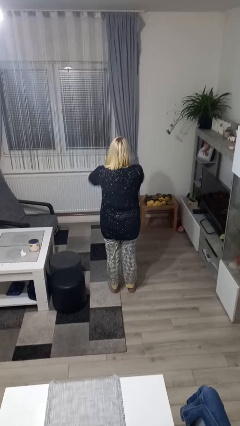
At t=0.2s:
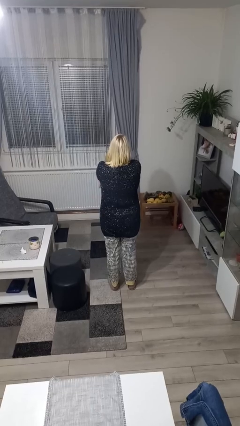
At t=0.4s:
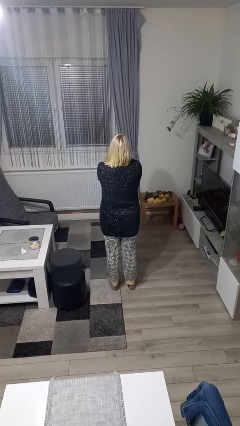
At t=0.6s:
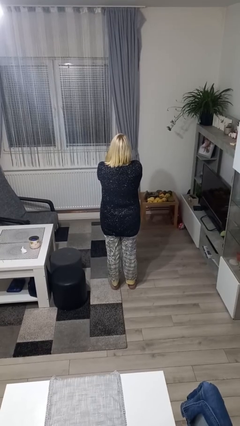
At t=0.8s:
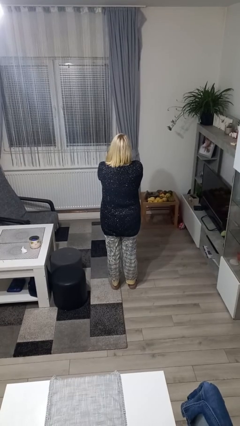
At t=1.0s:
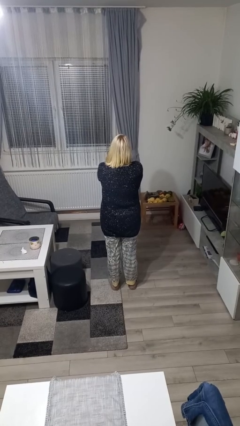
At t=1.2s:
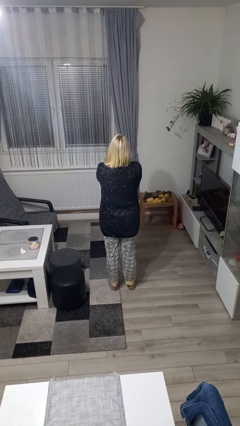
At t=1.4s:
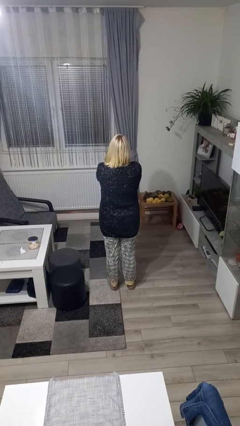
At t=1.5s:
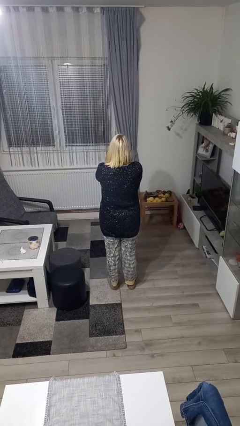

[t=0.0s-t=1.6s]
person gestures arms x

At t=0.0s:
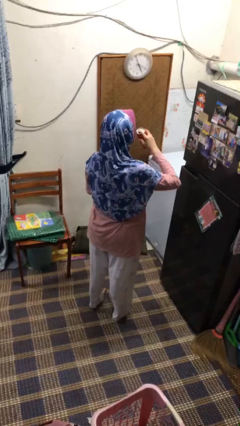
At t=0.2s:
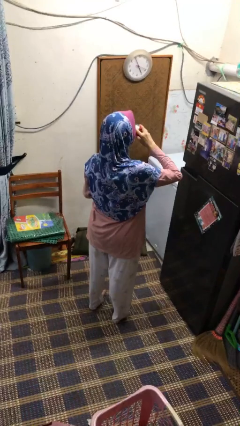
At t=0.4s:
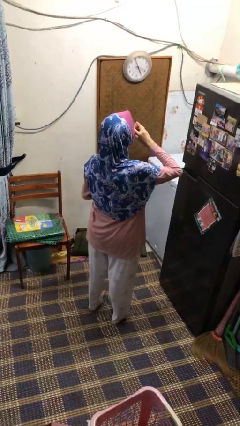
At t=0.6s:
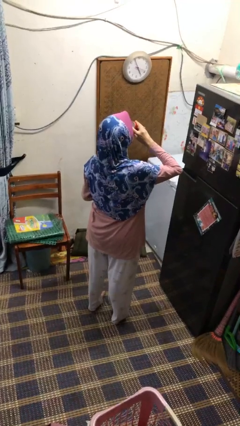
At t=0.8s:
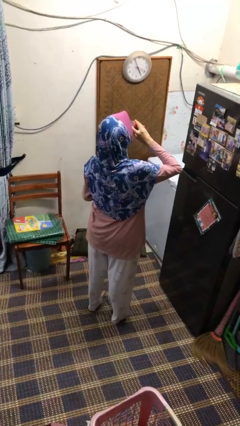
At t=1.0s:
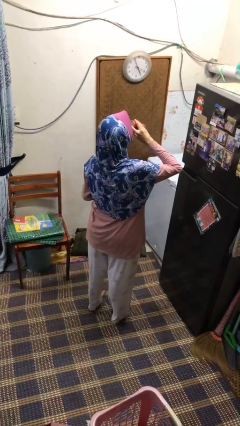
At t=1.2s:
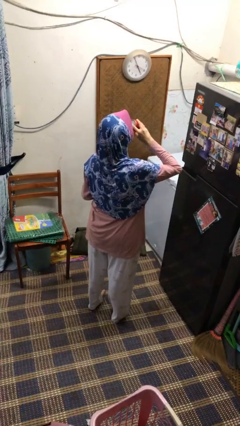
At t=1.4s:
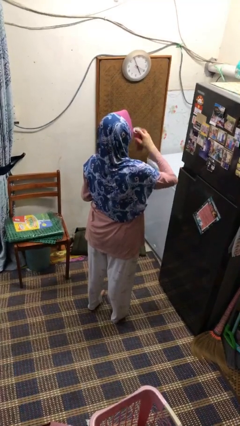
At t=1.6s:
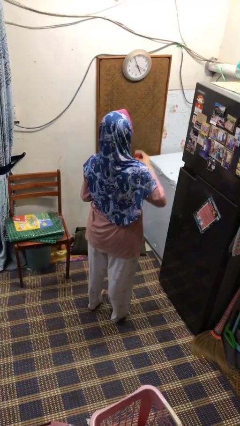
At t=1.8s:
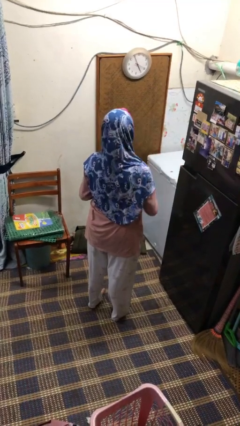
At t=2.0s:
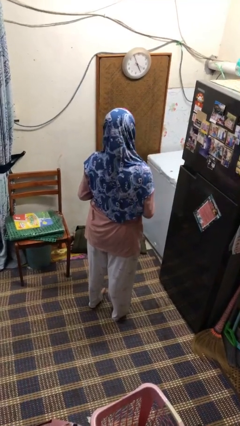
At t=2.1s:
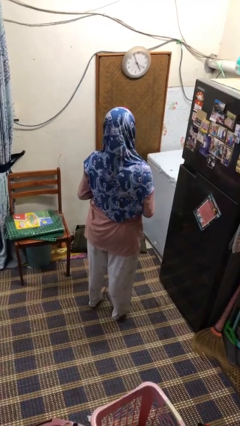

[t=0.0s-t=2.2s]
person drinks from beverage can

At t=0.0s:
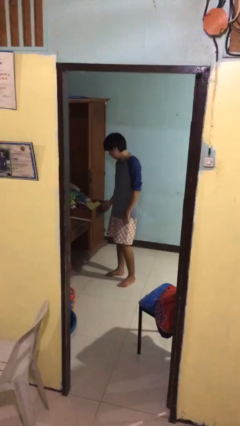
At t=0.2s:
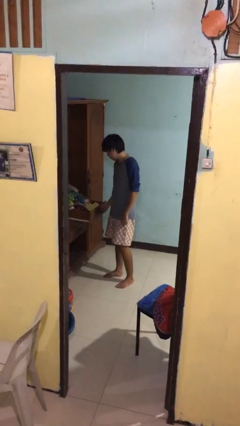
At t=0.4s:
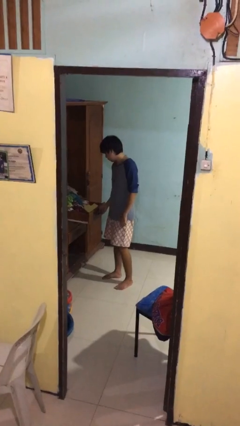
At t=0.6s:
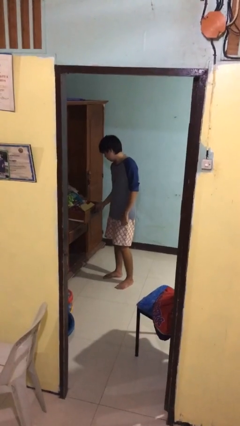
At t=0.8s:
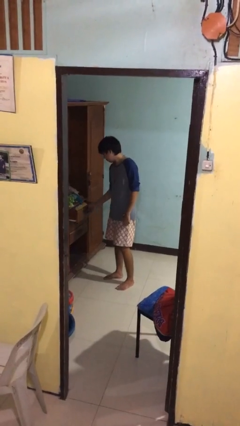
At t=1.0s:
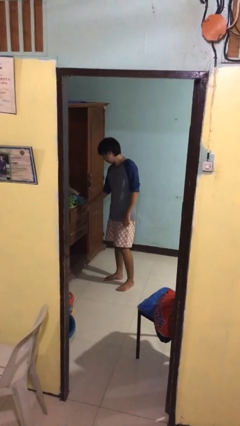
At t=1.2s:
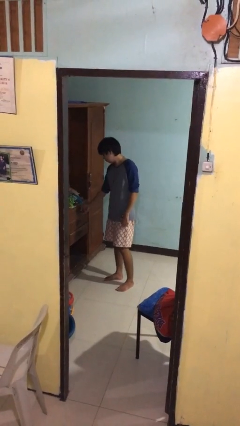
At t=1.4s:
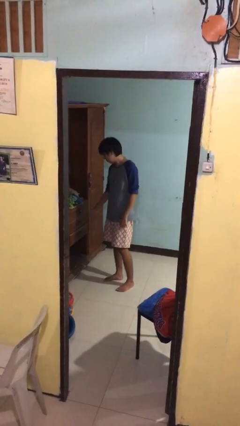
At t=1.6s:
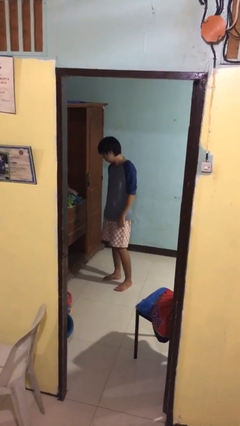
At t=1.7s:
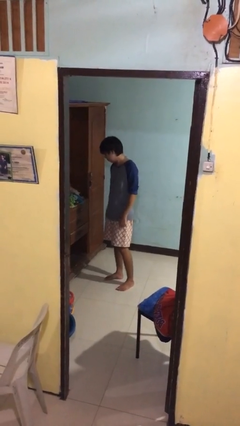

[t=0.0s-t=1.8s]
person closes dresser drawer

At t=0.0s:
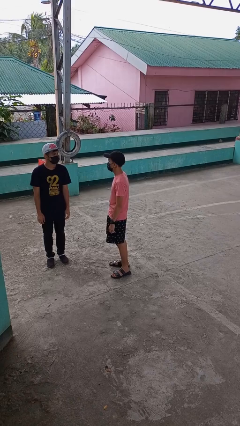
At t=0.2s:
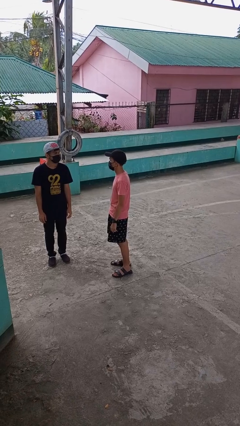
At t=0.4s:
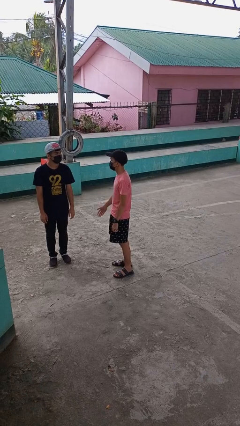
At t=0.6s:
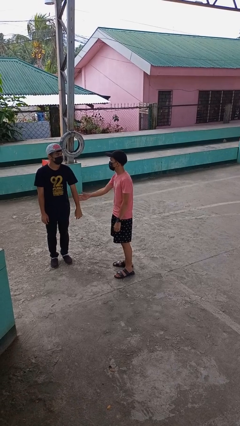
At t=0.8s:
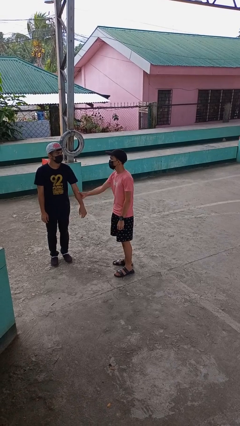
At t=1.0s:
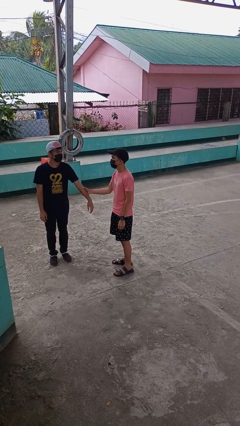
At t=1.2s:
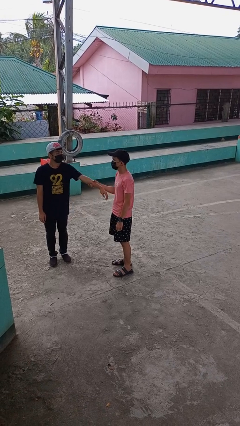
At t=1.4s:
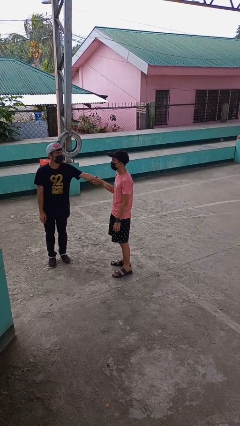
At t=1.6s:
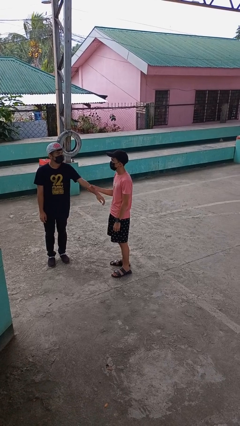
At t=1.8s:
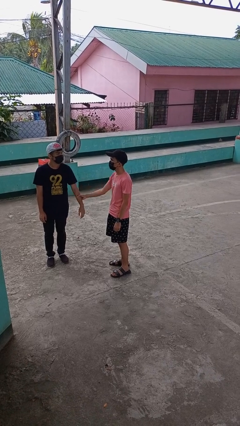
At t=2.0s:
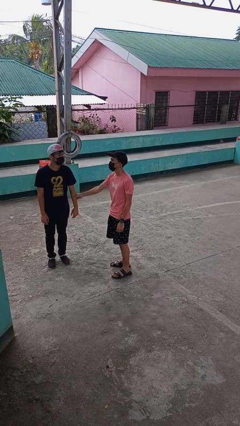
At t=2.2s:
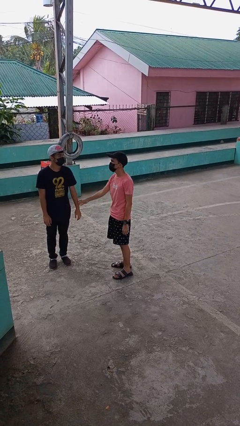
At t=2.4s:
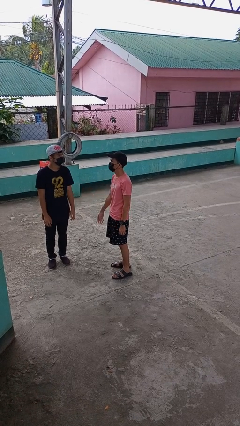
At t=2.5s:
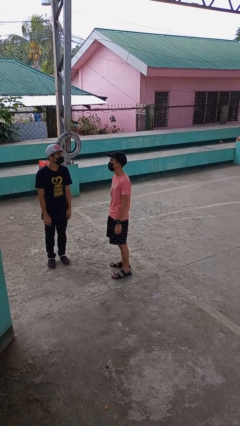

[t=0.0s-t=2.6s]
person grabs person by forearm

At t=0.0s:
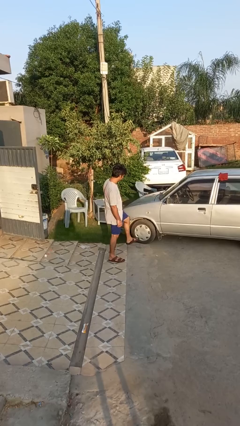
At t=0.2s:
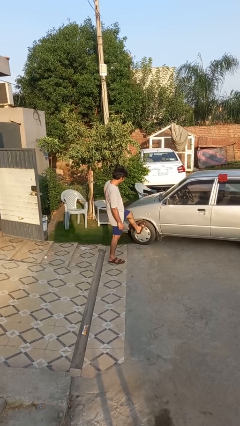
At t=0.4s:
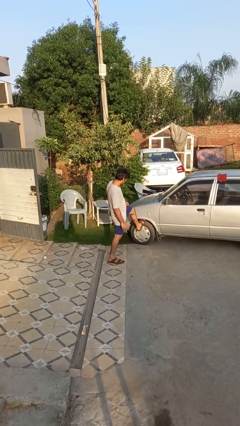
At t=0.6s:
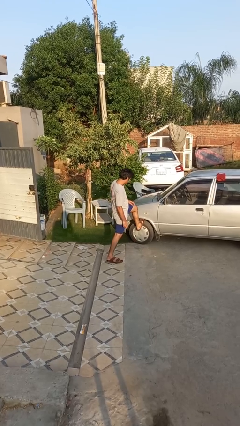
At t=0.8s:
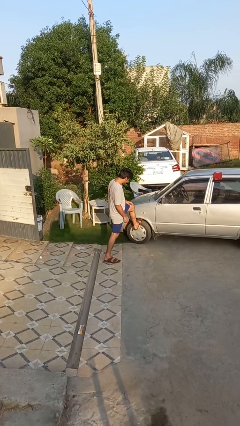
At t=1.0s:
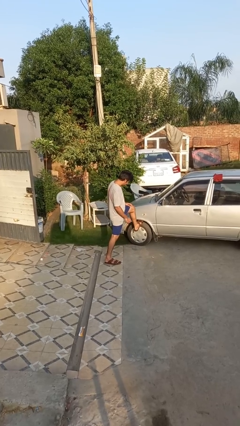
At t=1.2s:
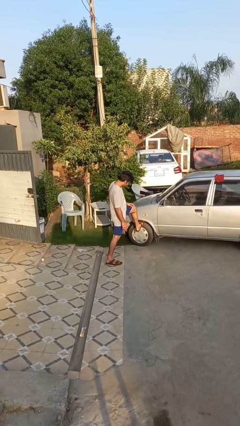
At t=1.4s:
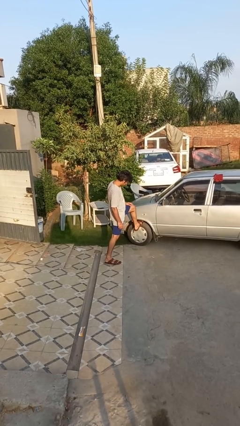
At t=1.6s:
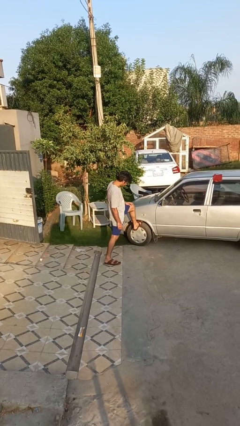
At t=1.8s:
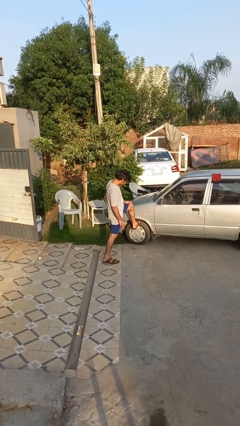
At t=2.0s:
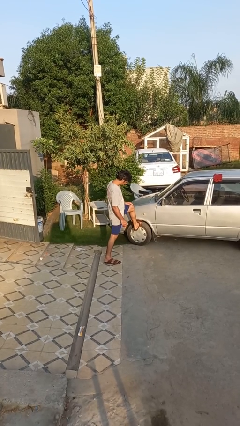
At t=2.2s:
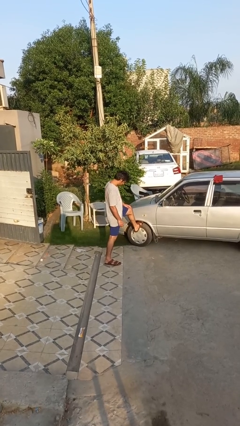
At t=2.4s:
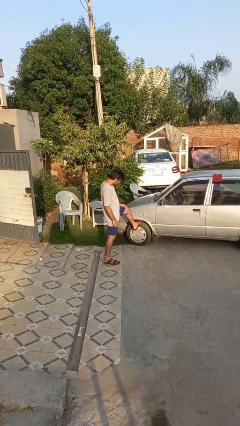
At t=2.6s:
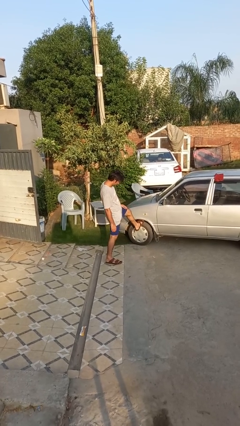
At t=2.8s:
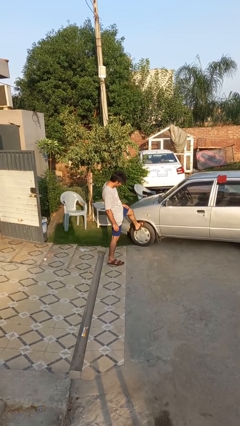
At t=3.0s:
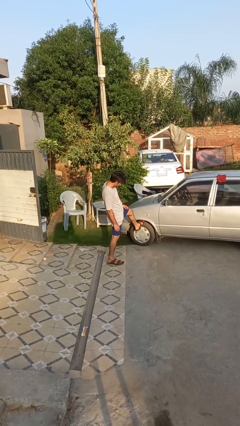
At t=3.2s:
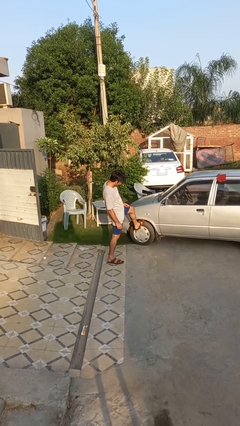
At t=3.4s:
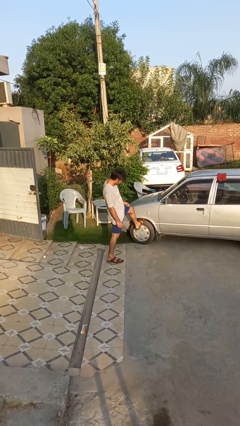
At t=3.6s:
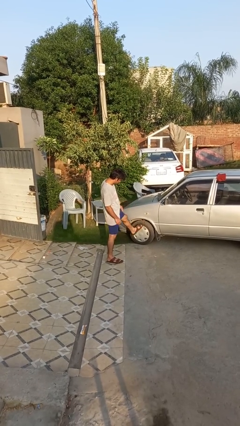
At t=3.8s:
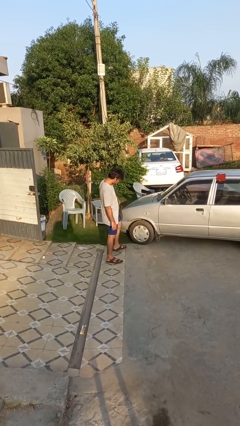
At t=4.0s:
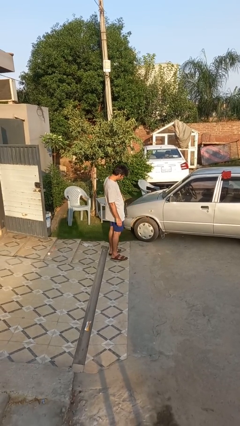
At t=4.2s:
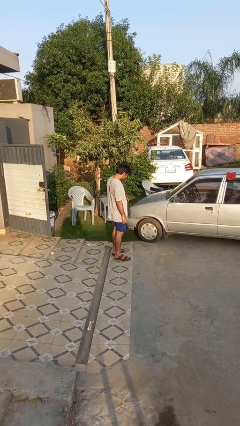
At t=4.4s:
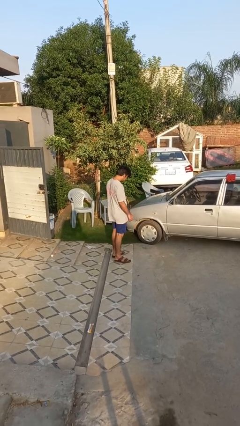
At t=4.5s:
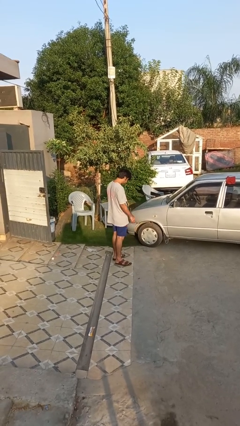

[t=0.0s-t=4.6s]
person kicks car tires

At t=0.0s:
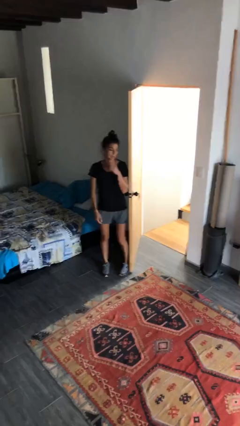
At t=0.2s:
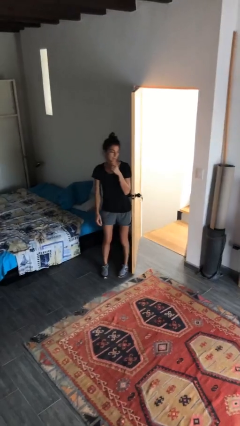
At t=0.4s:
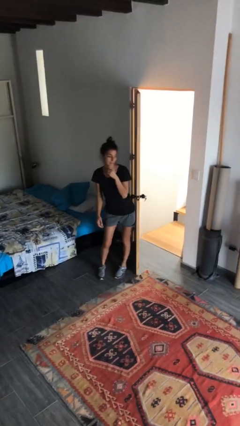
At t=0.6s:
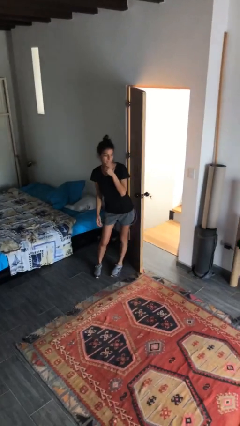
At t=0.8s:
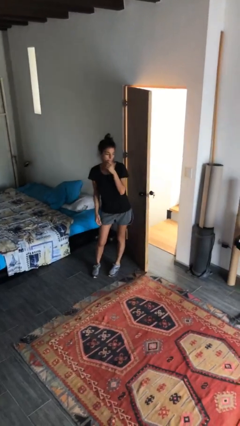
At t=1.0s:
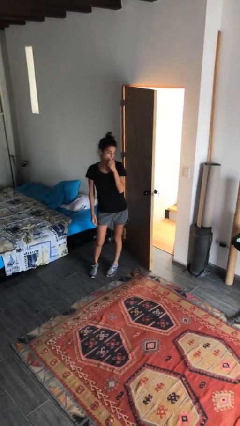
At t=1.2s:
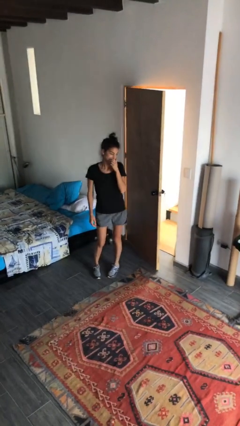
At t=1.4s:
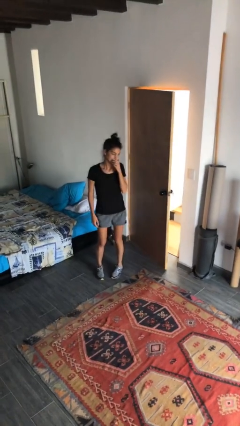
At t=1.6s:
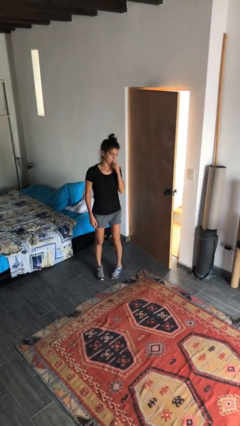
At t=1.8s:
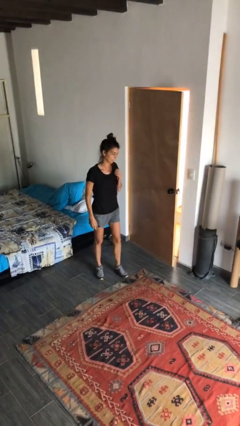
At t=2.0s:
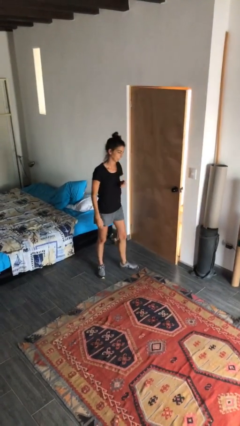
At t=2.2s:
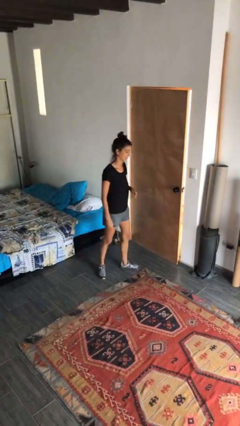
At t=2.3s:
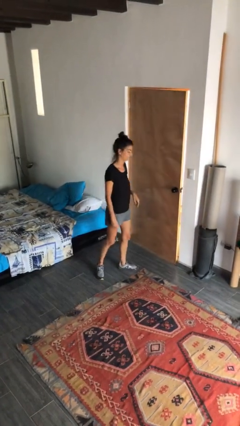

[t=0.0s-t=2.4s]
person closes door with hip

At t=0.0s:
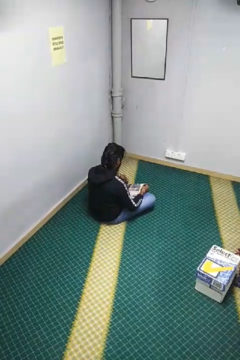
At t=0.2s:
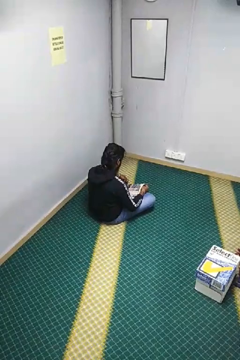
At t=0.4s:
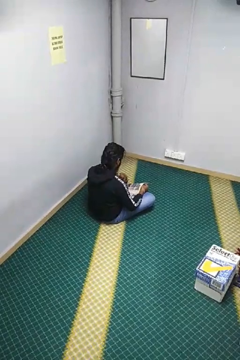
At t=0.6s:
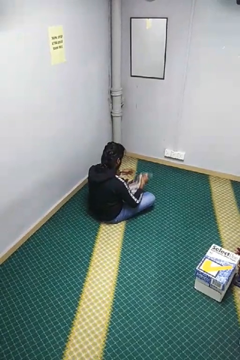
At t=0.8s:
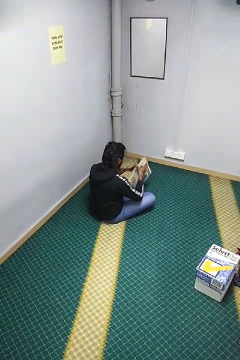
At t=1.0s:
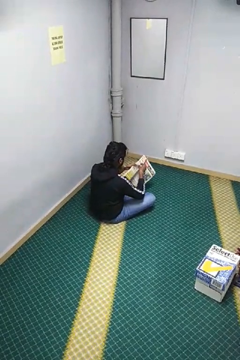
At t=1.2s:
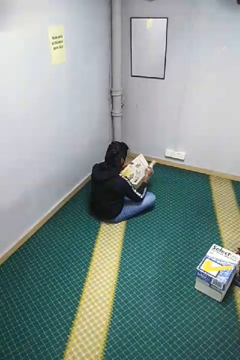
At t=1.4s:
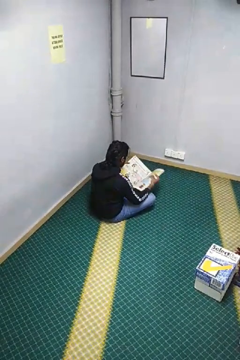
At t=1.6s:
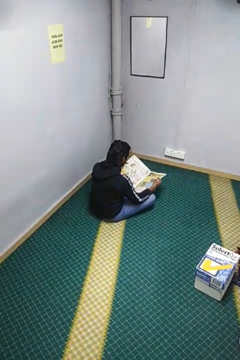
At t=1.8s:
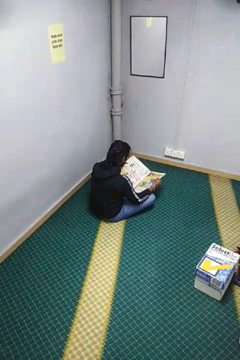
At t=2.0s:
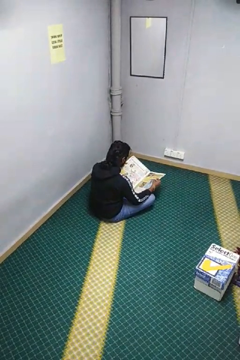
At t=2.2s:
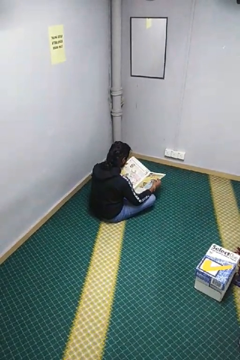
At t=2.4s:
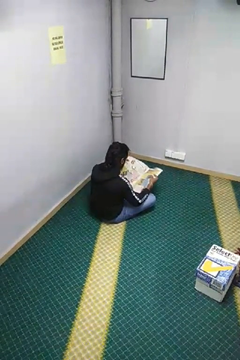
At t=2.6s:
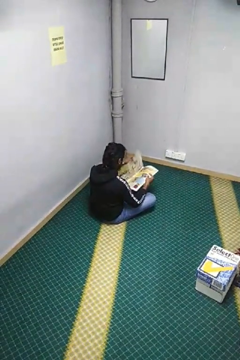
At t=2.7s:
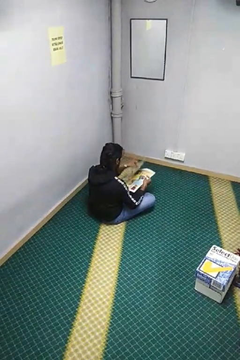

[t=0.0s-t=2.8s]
person reads newspaper
